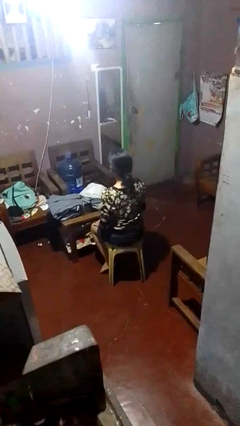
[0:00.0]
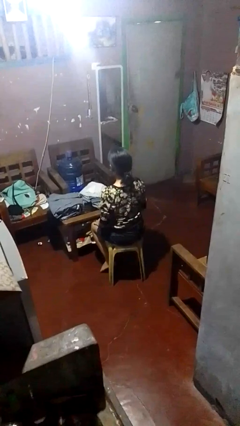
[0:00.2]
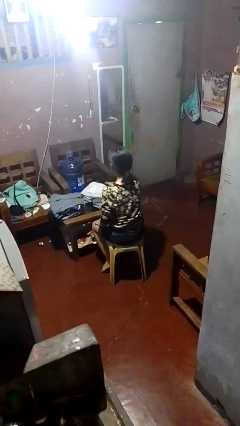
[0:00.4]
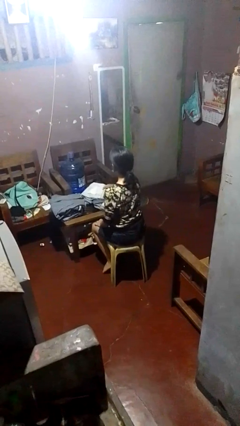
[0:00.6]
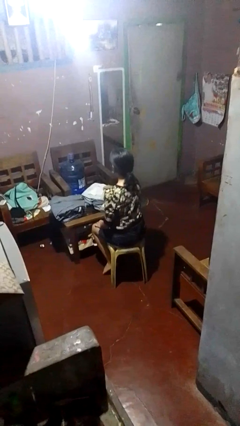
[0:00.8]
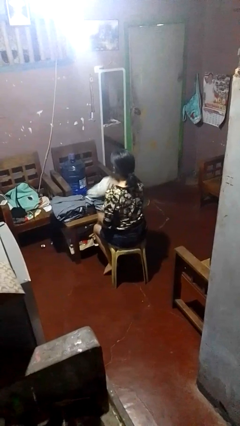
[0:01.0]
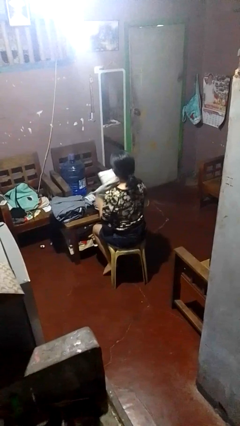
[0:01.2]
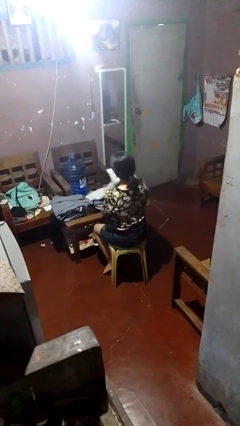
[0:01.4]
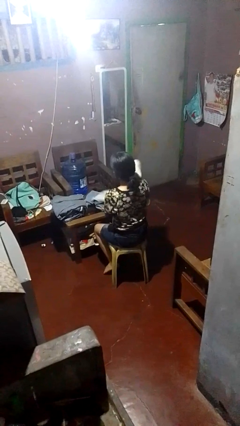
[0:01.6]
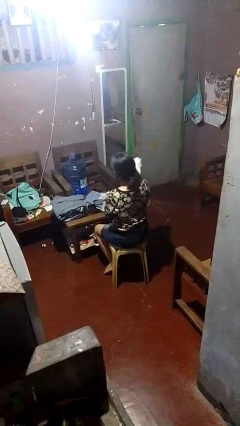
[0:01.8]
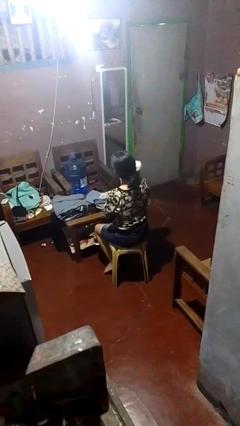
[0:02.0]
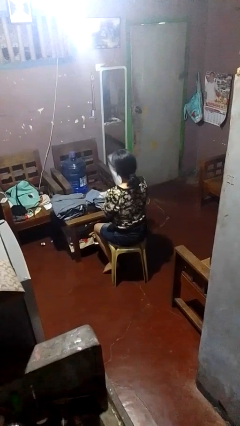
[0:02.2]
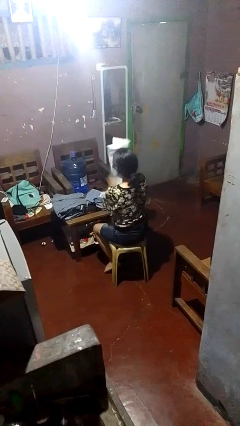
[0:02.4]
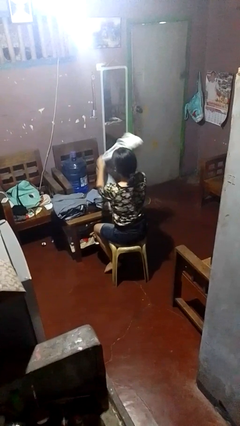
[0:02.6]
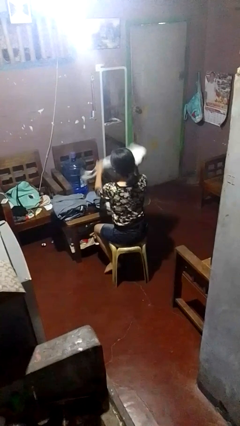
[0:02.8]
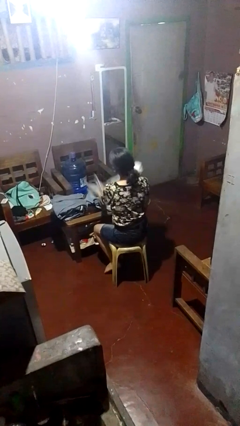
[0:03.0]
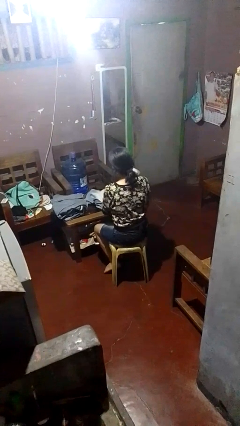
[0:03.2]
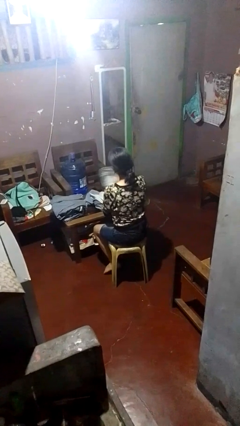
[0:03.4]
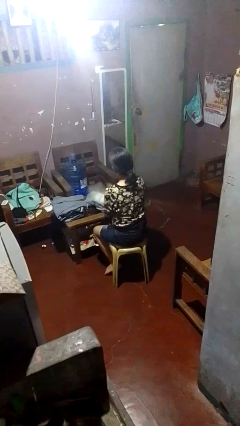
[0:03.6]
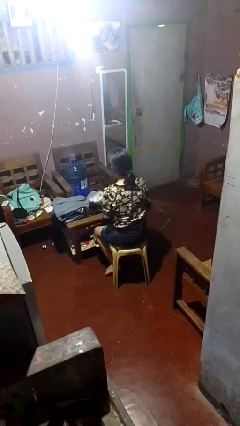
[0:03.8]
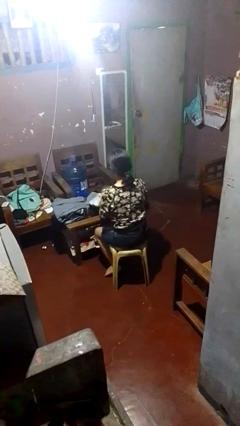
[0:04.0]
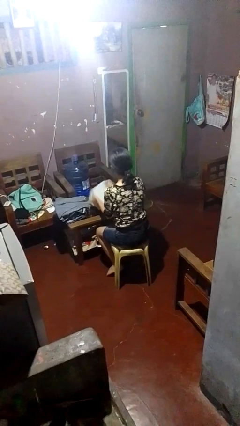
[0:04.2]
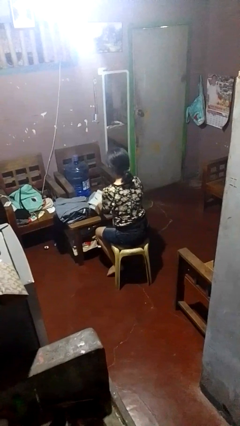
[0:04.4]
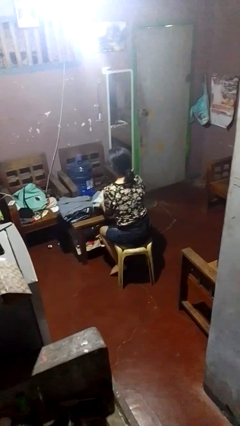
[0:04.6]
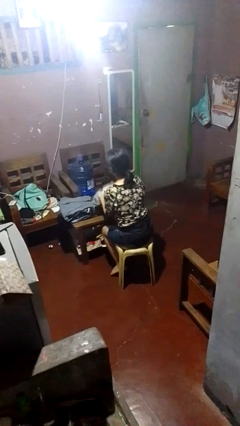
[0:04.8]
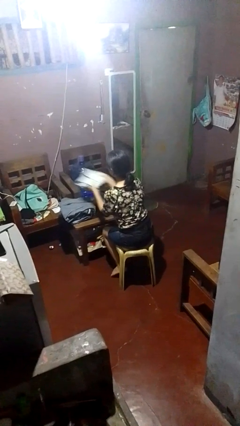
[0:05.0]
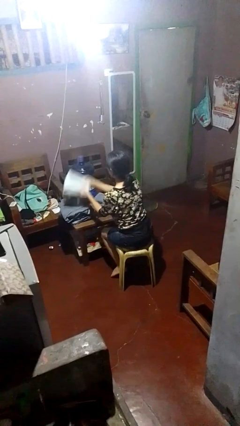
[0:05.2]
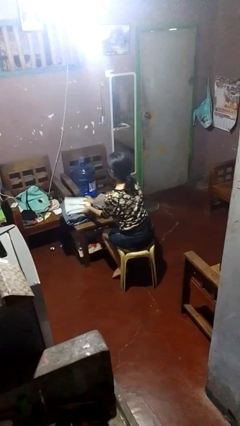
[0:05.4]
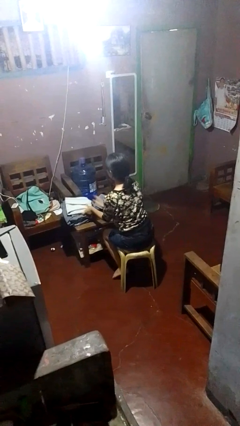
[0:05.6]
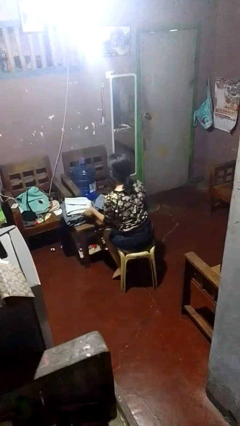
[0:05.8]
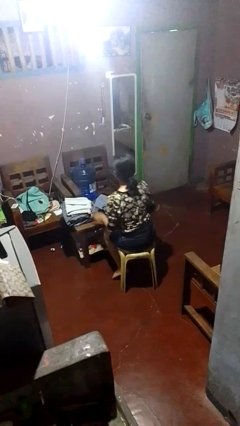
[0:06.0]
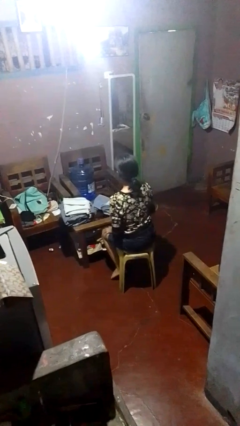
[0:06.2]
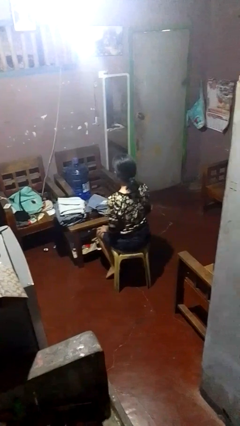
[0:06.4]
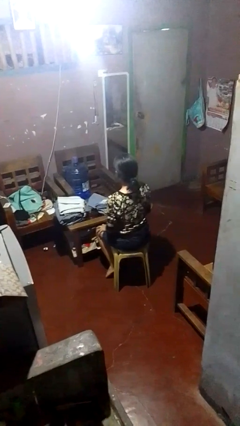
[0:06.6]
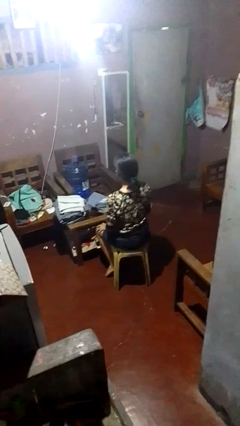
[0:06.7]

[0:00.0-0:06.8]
person folds pants

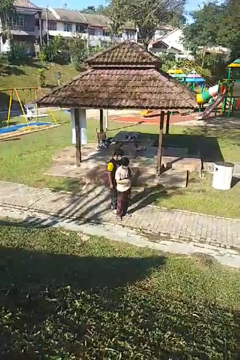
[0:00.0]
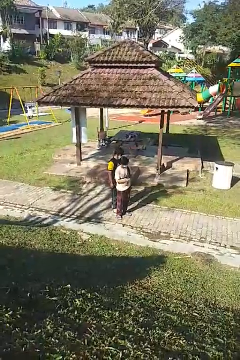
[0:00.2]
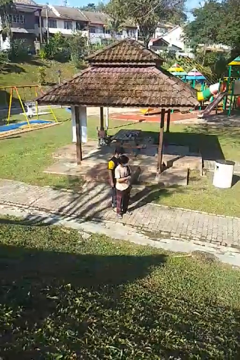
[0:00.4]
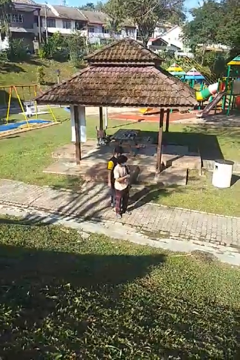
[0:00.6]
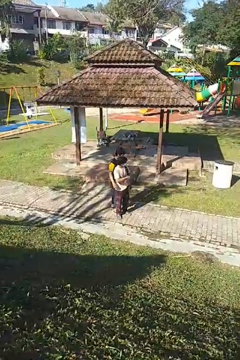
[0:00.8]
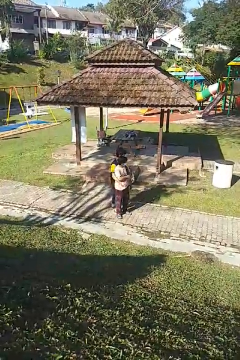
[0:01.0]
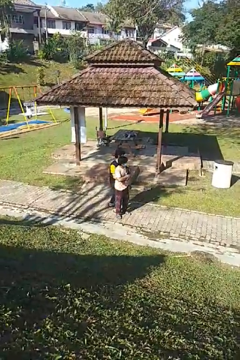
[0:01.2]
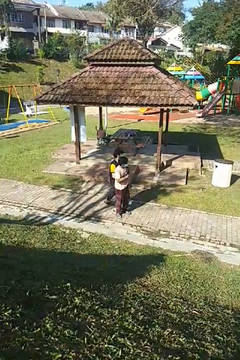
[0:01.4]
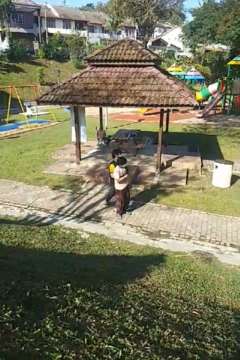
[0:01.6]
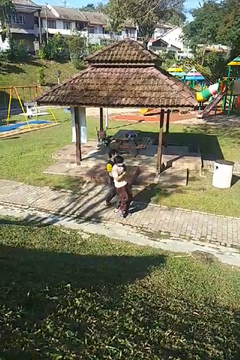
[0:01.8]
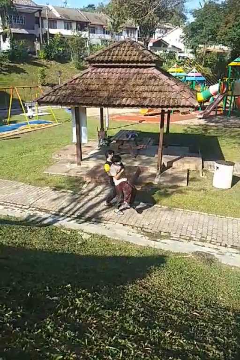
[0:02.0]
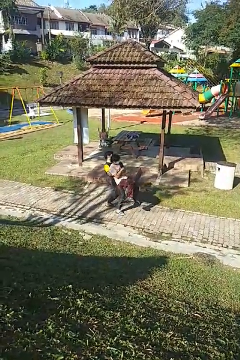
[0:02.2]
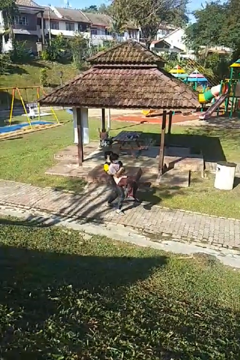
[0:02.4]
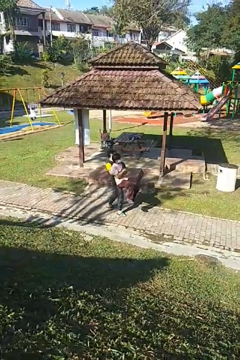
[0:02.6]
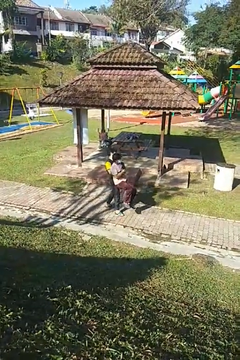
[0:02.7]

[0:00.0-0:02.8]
person picks up person

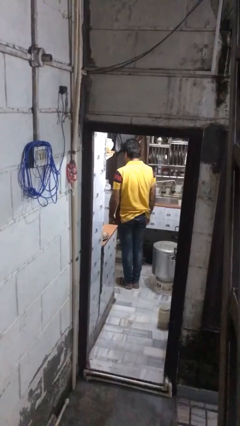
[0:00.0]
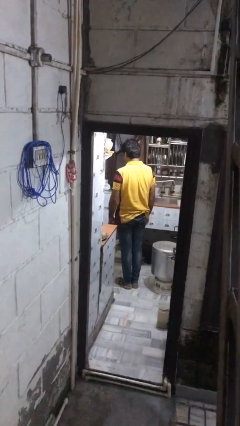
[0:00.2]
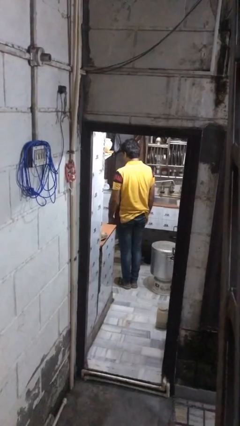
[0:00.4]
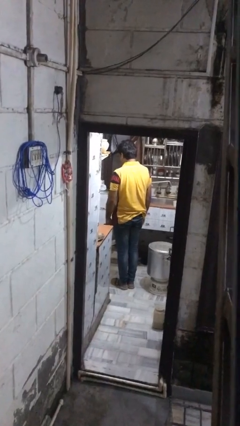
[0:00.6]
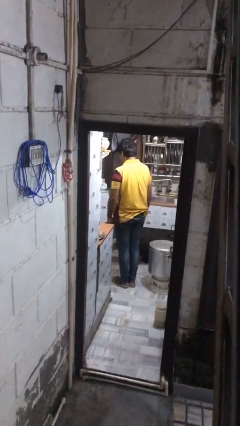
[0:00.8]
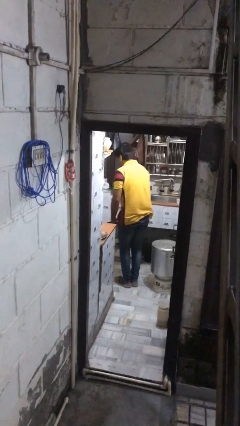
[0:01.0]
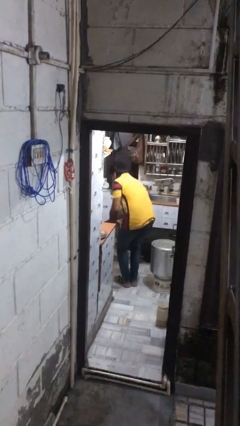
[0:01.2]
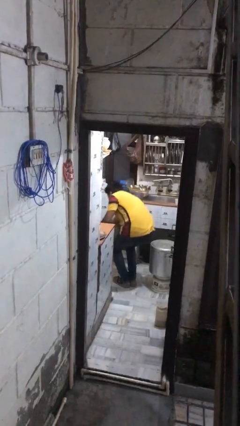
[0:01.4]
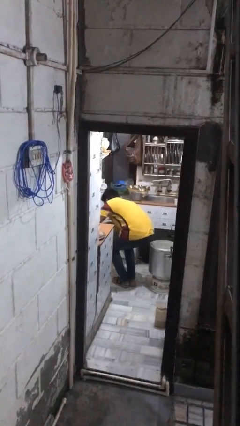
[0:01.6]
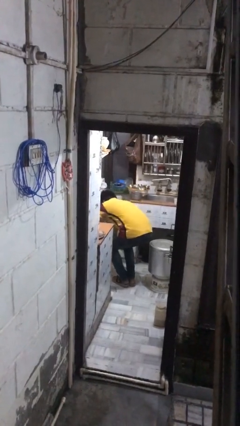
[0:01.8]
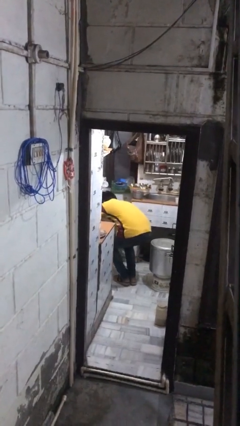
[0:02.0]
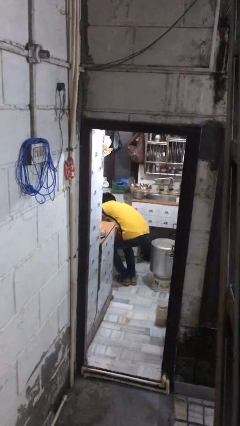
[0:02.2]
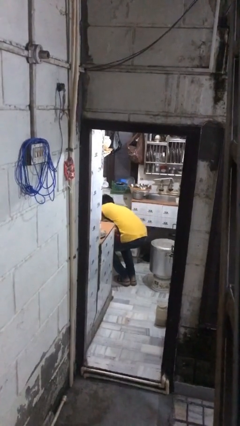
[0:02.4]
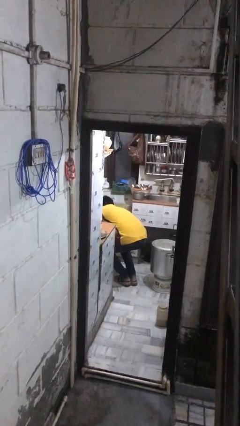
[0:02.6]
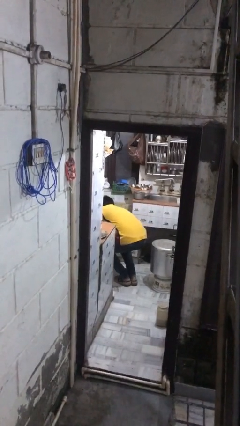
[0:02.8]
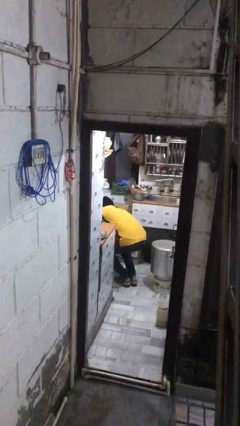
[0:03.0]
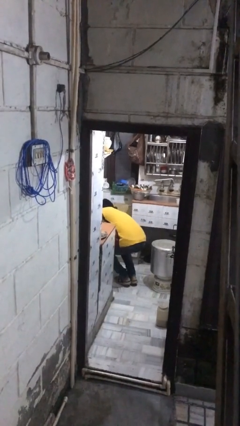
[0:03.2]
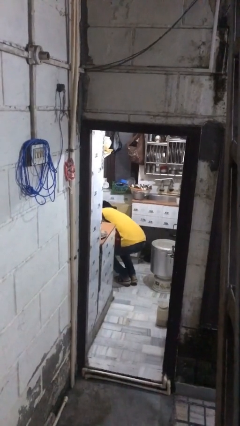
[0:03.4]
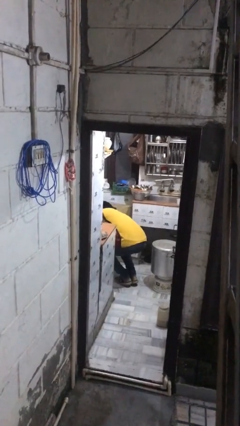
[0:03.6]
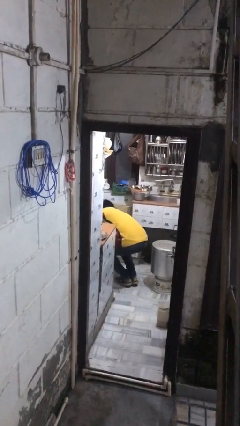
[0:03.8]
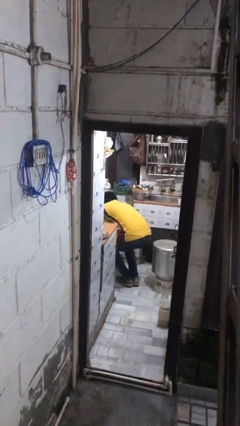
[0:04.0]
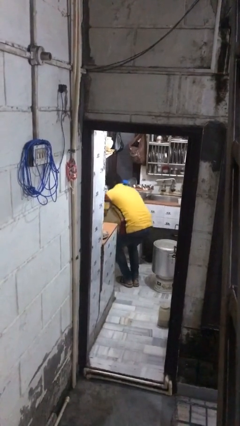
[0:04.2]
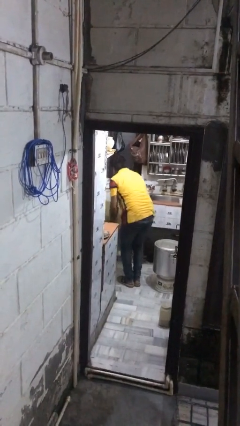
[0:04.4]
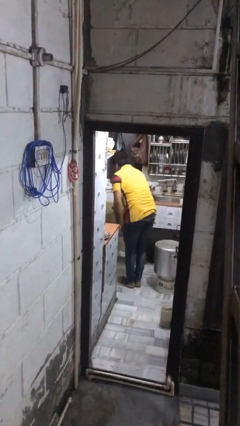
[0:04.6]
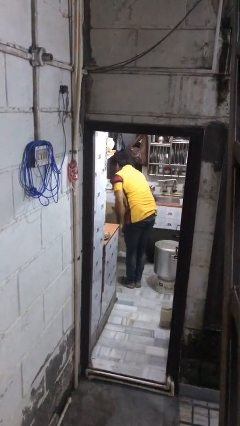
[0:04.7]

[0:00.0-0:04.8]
person searches in kitchen drawer

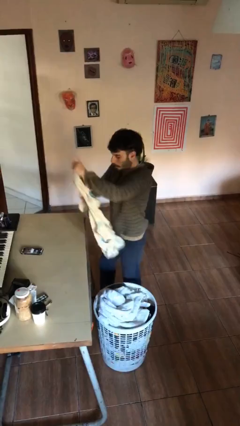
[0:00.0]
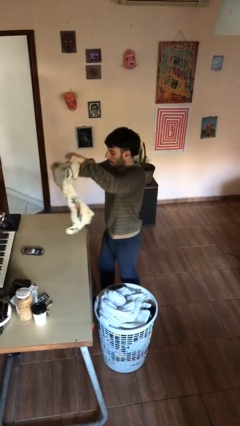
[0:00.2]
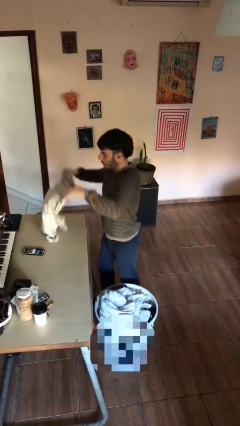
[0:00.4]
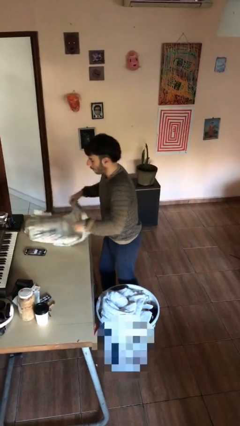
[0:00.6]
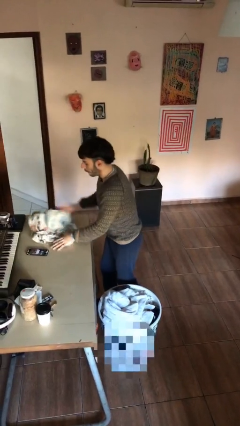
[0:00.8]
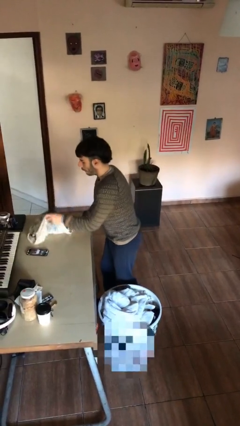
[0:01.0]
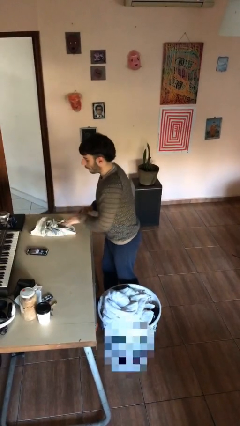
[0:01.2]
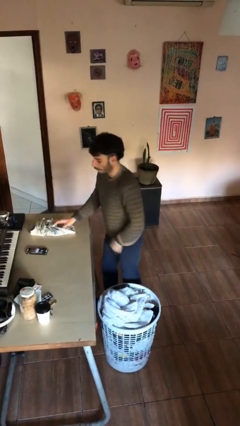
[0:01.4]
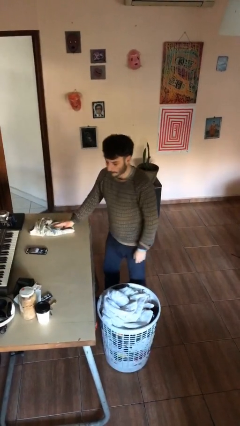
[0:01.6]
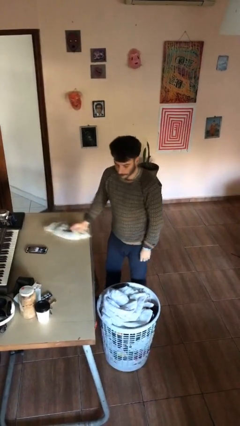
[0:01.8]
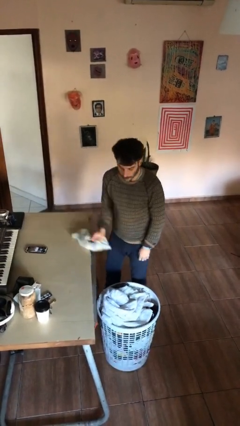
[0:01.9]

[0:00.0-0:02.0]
person folds shirt

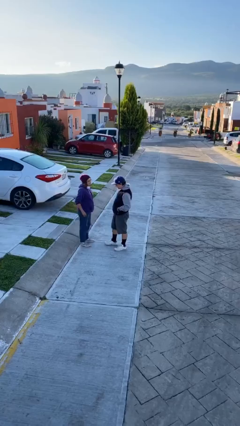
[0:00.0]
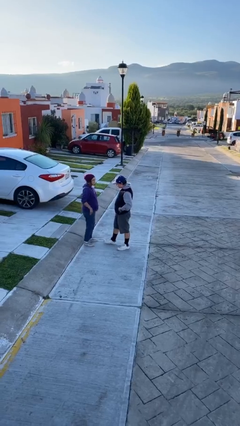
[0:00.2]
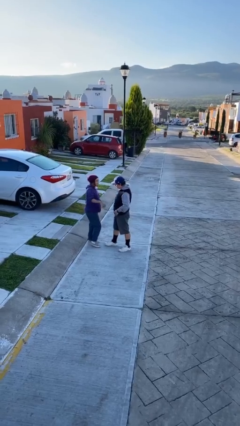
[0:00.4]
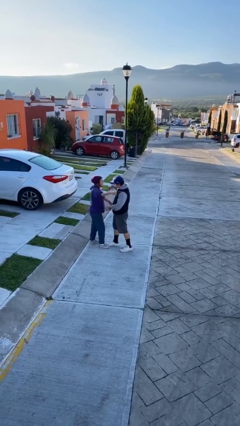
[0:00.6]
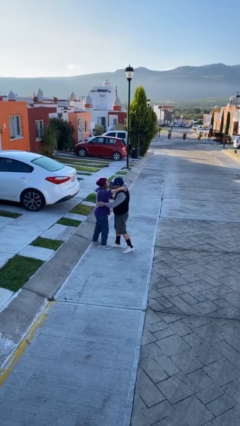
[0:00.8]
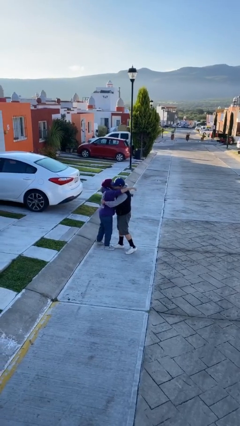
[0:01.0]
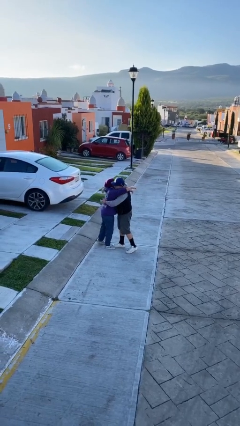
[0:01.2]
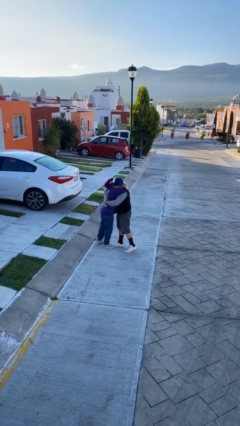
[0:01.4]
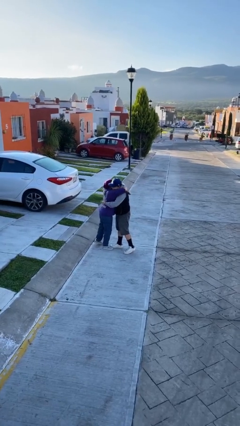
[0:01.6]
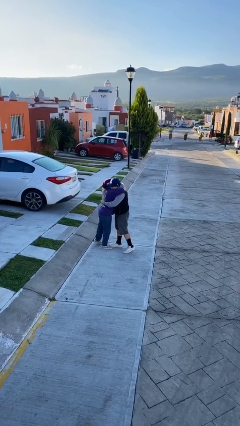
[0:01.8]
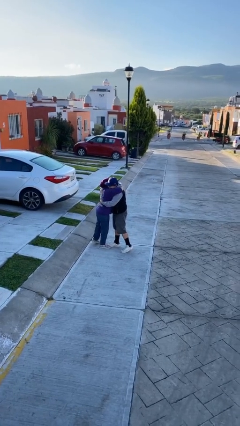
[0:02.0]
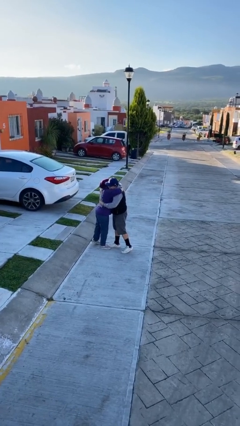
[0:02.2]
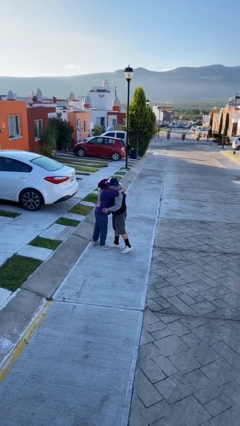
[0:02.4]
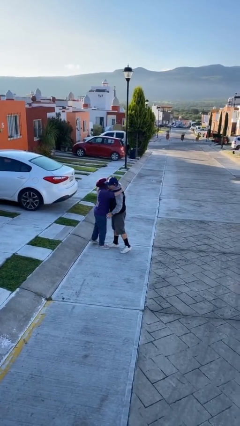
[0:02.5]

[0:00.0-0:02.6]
person embraces person
